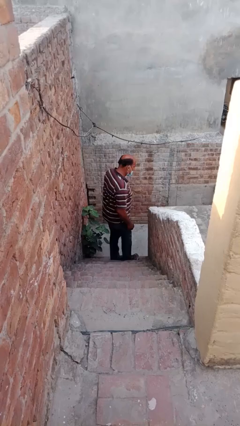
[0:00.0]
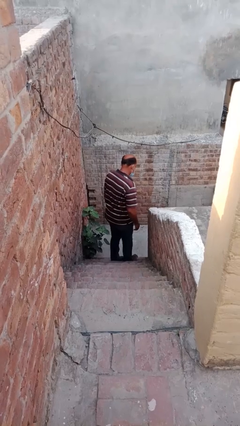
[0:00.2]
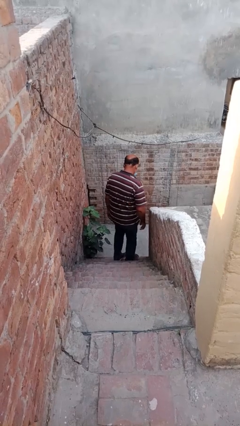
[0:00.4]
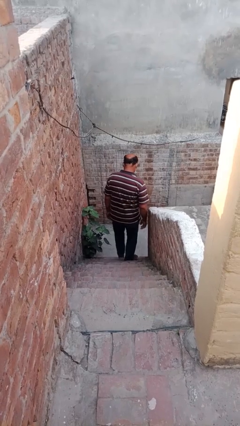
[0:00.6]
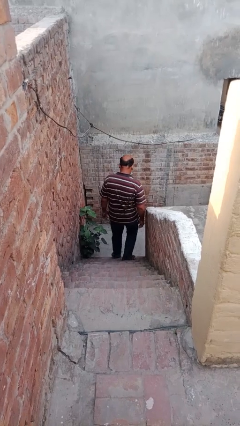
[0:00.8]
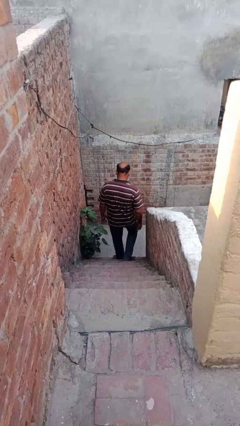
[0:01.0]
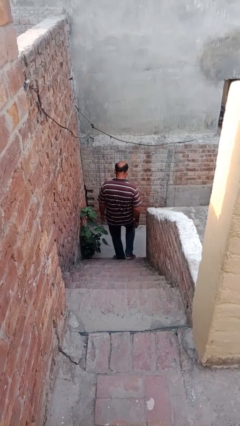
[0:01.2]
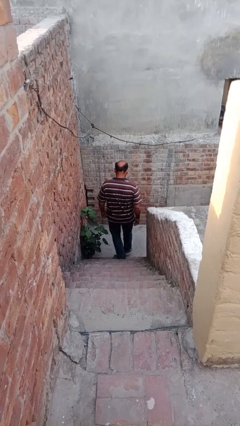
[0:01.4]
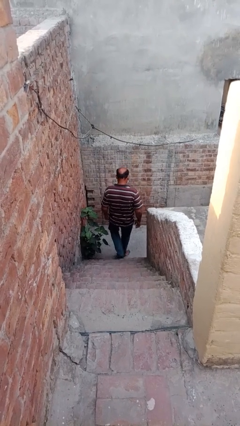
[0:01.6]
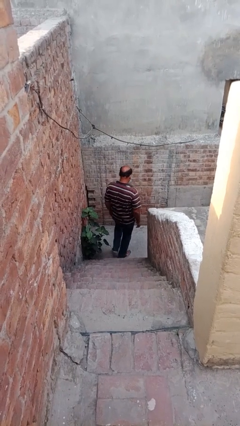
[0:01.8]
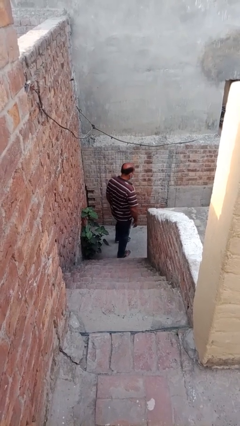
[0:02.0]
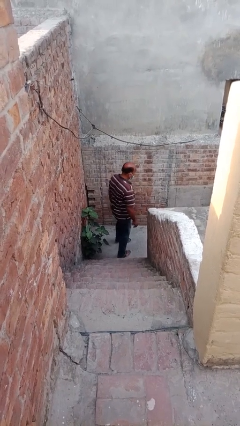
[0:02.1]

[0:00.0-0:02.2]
person climbs down stairs

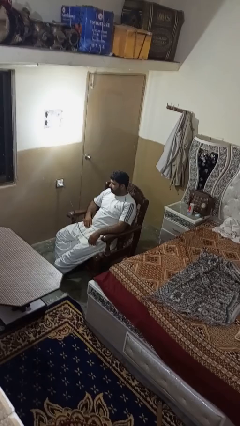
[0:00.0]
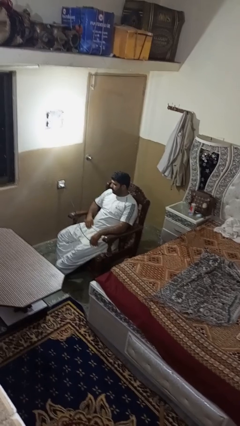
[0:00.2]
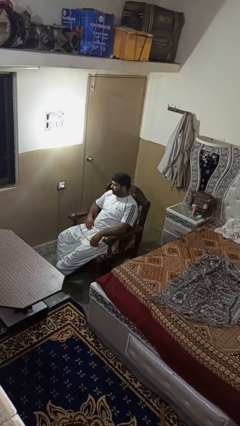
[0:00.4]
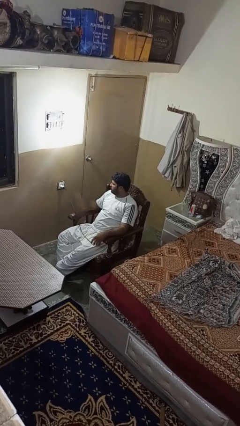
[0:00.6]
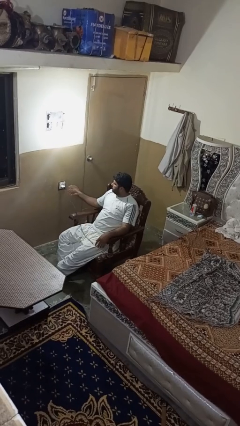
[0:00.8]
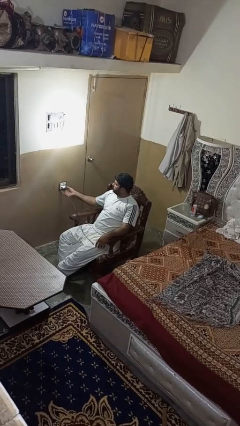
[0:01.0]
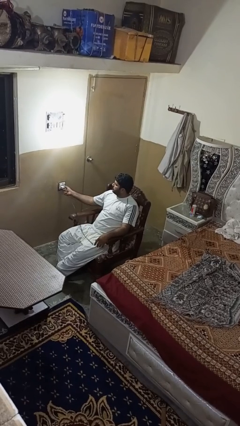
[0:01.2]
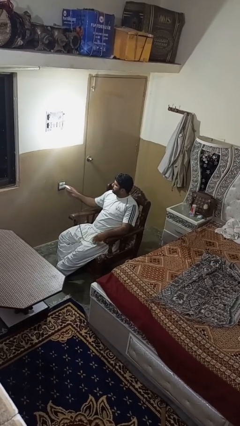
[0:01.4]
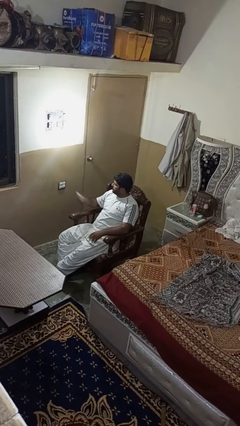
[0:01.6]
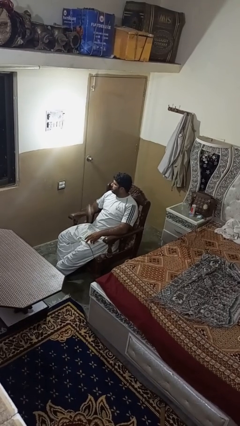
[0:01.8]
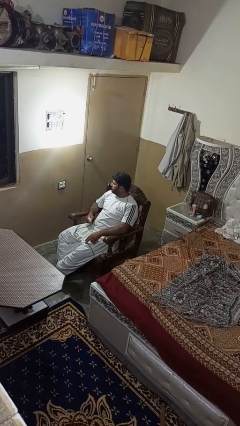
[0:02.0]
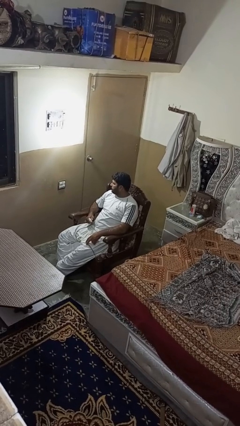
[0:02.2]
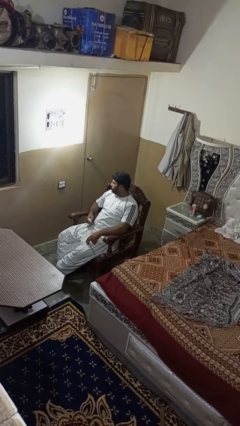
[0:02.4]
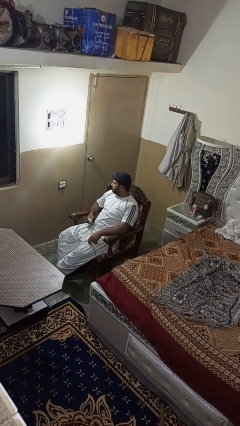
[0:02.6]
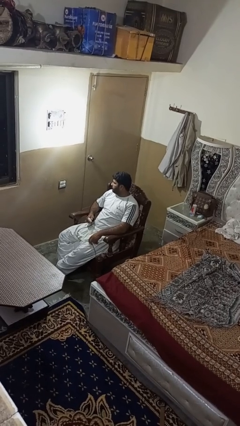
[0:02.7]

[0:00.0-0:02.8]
person unplugs from electrical socket

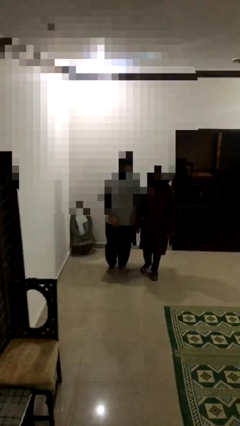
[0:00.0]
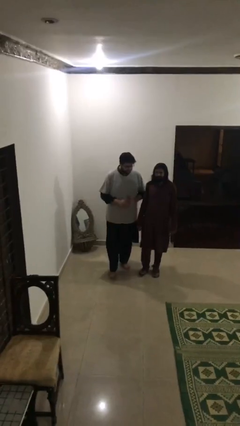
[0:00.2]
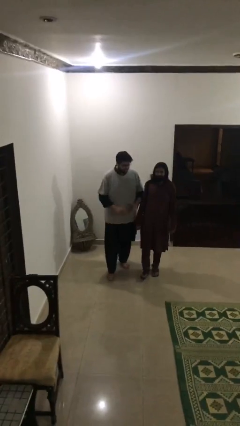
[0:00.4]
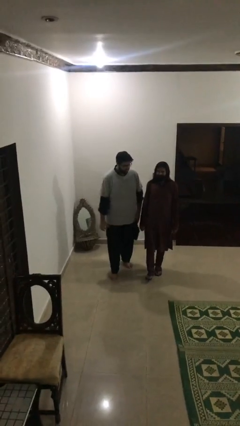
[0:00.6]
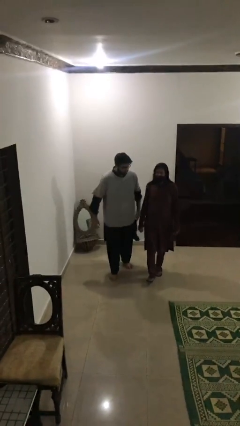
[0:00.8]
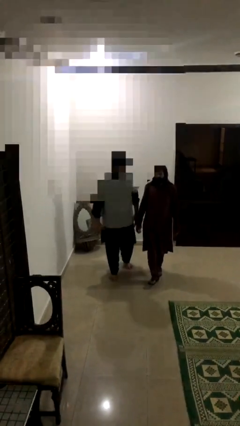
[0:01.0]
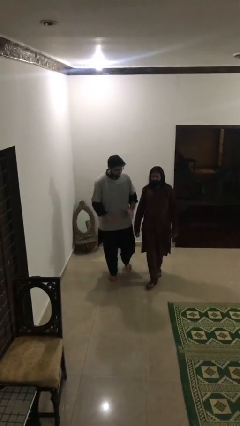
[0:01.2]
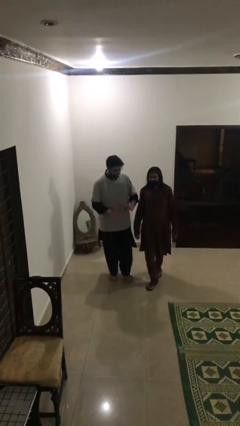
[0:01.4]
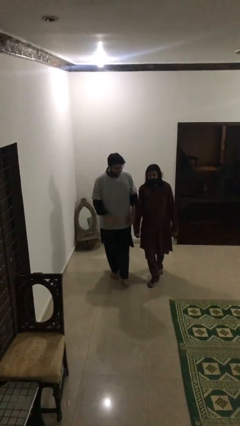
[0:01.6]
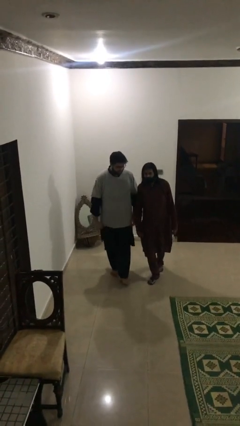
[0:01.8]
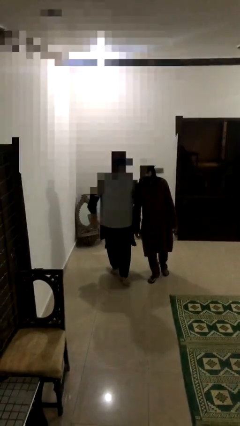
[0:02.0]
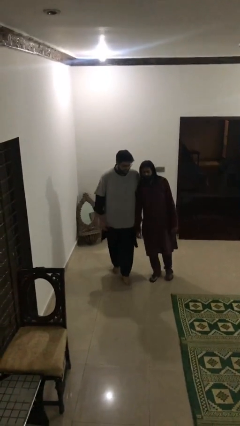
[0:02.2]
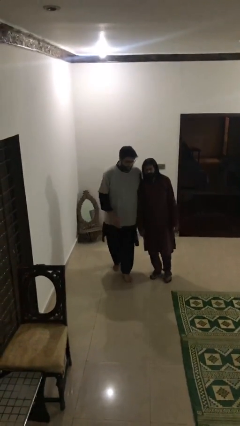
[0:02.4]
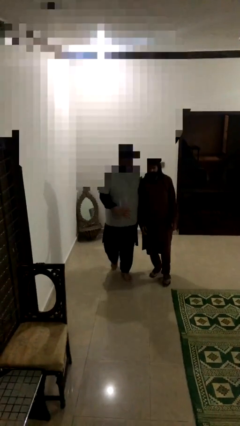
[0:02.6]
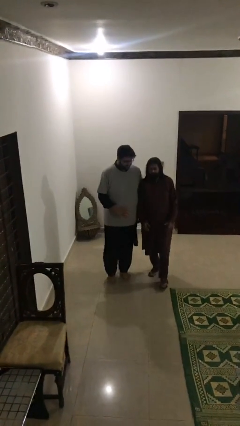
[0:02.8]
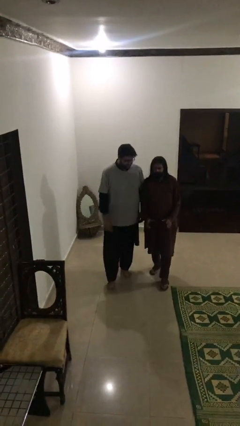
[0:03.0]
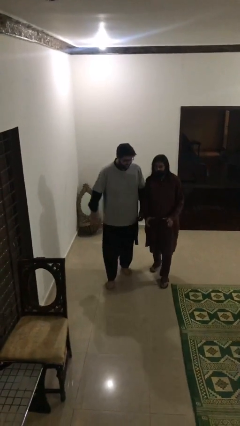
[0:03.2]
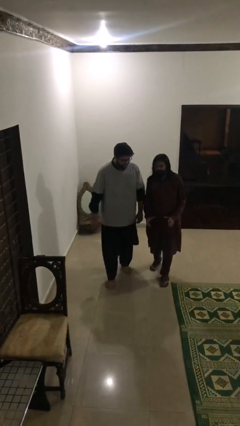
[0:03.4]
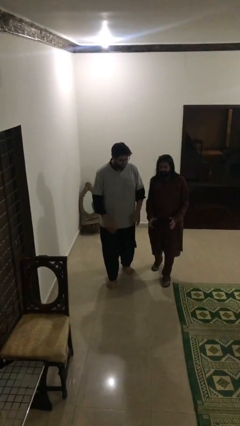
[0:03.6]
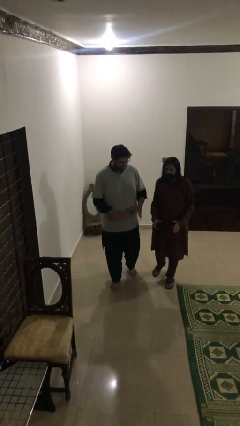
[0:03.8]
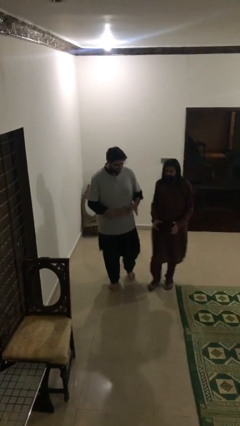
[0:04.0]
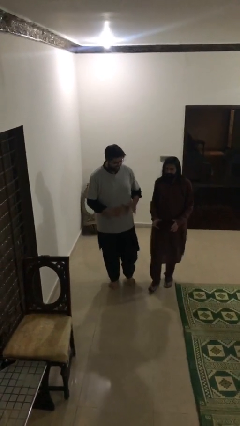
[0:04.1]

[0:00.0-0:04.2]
person talks to person

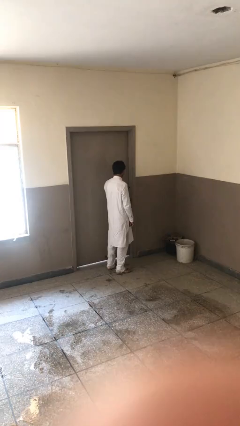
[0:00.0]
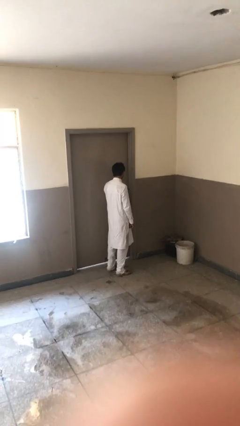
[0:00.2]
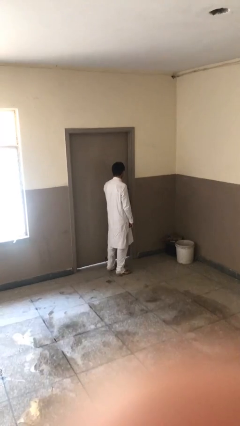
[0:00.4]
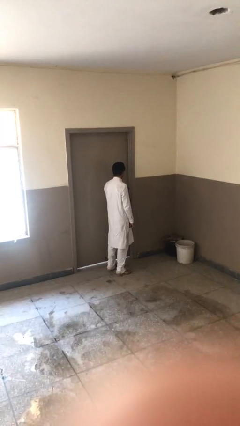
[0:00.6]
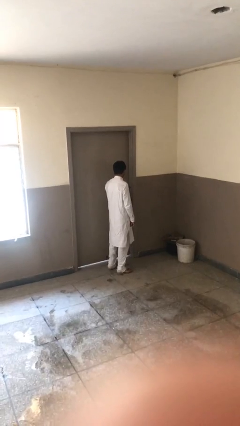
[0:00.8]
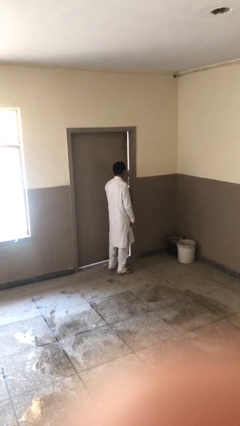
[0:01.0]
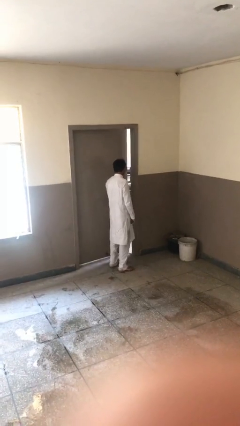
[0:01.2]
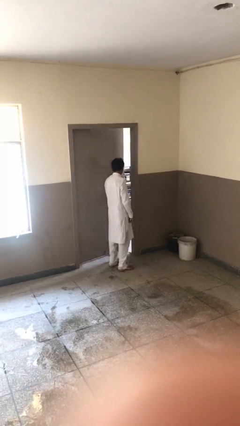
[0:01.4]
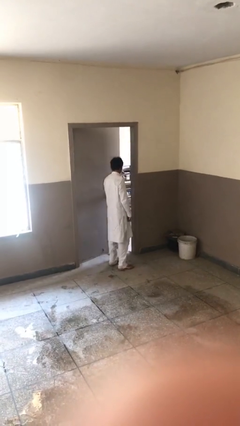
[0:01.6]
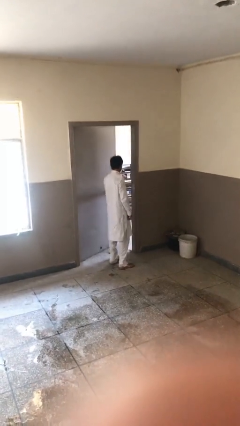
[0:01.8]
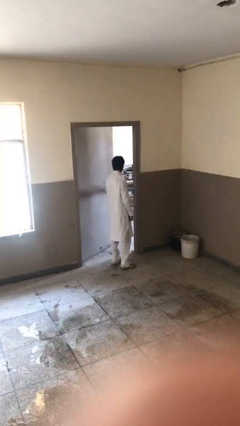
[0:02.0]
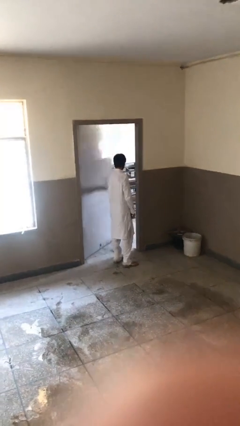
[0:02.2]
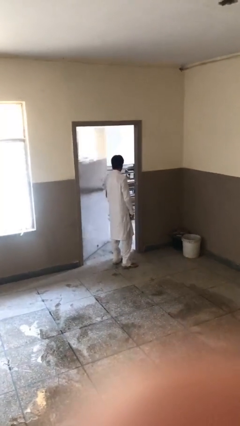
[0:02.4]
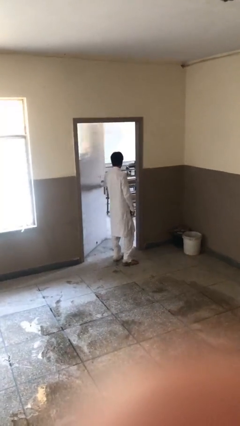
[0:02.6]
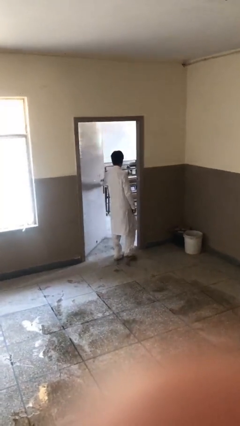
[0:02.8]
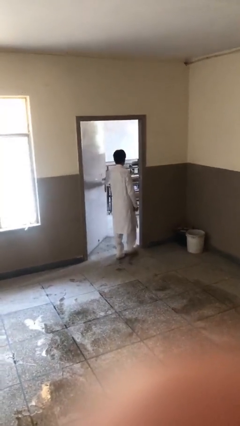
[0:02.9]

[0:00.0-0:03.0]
person opens facility door

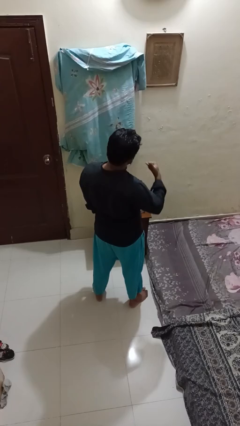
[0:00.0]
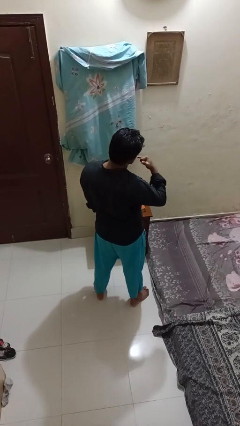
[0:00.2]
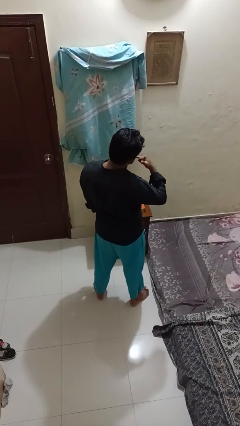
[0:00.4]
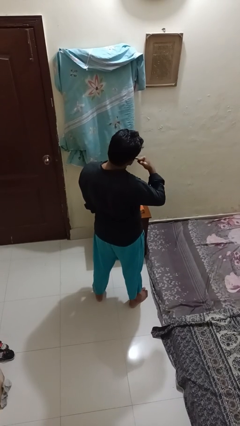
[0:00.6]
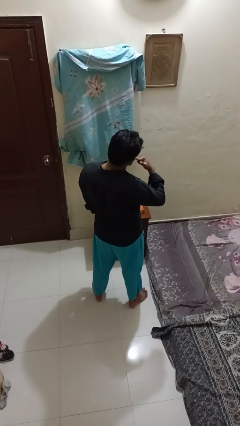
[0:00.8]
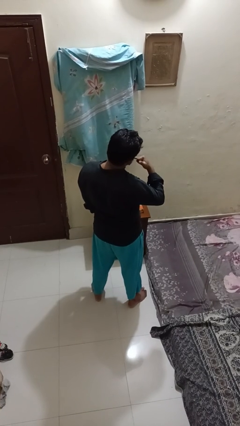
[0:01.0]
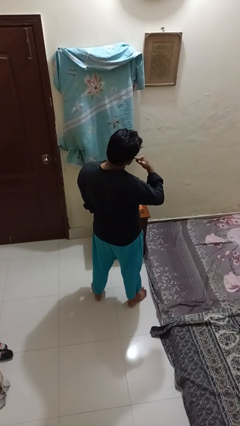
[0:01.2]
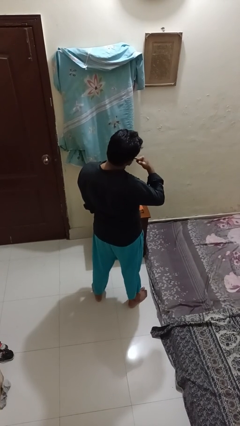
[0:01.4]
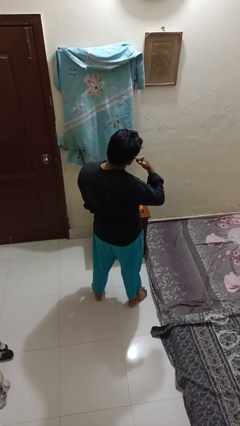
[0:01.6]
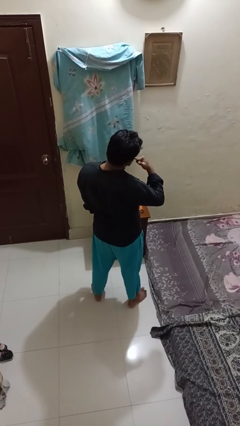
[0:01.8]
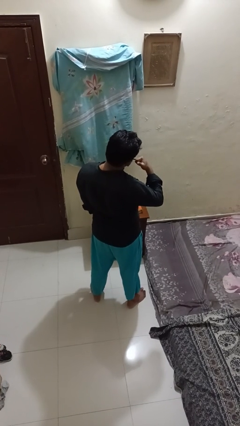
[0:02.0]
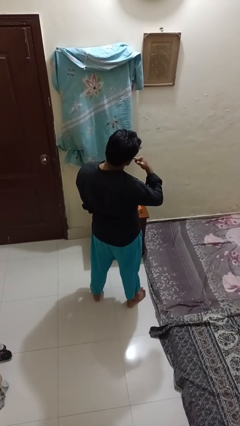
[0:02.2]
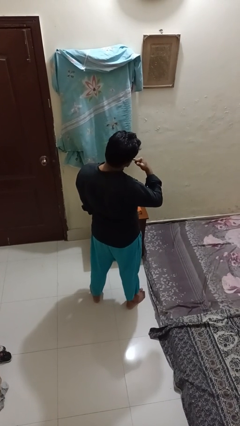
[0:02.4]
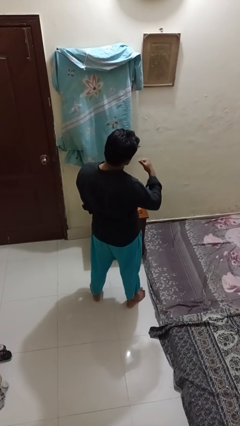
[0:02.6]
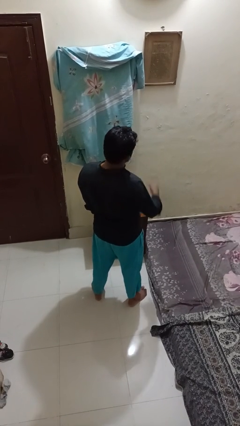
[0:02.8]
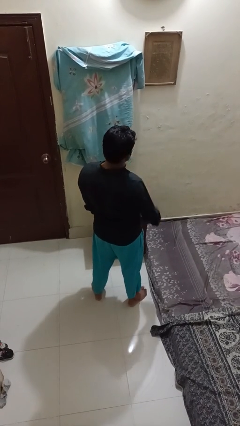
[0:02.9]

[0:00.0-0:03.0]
person gestures call me

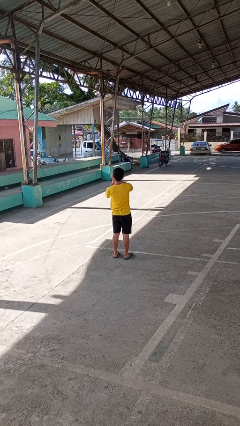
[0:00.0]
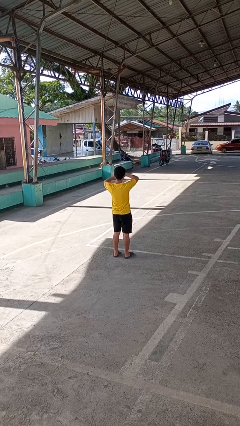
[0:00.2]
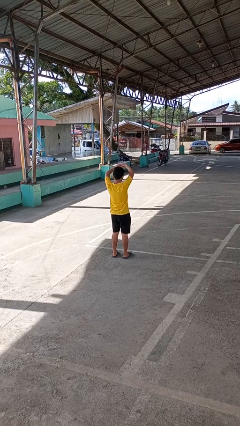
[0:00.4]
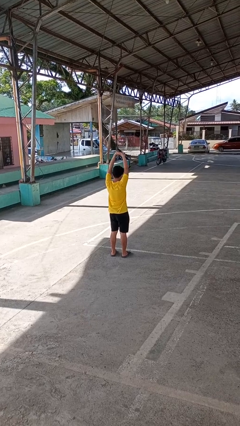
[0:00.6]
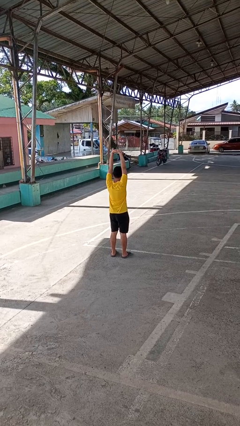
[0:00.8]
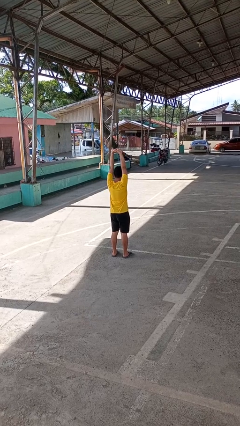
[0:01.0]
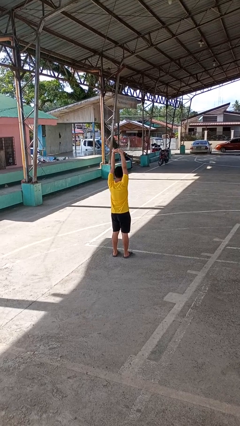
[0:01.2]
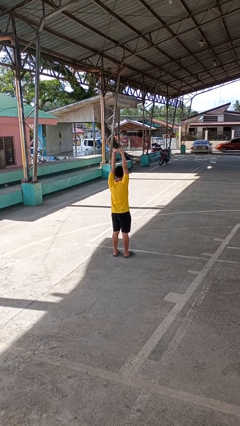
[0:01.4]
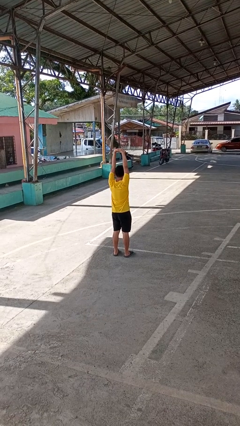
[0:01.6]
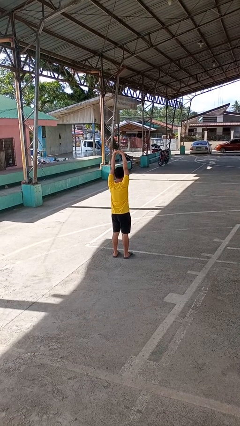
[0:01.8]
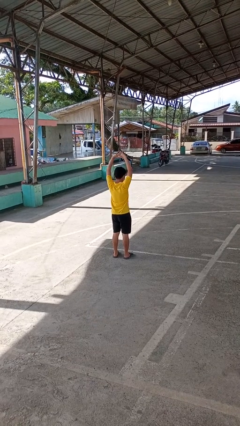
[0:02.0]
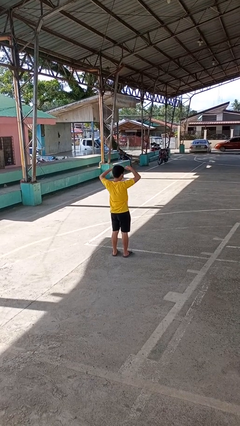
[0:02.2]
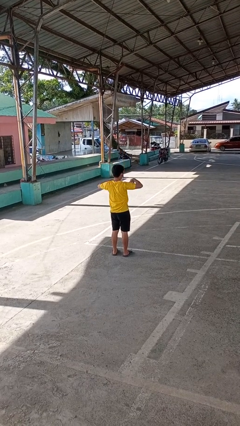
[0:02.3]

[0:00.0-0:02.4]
person stretches arms over head
